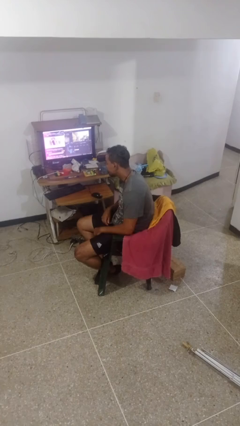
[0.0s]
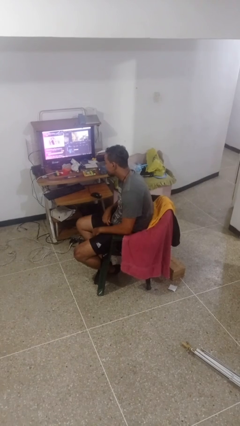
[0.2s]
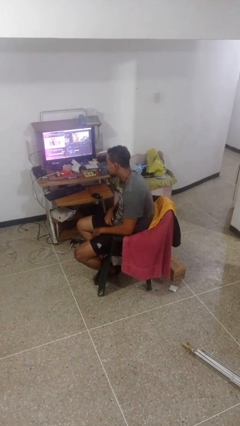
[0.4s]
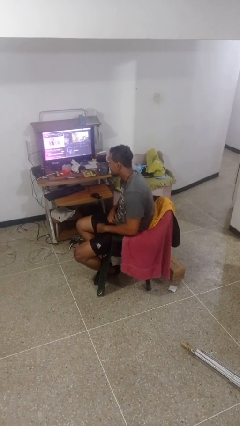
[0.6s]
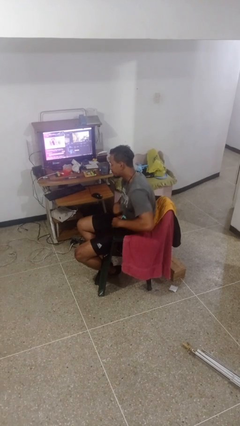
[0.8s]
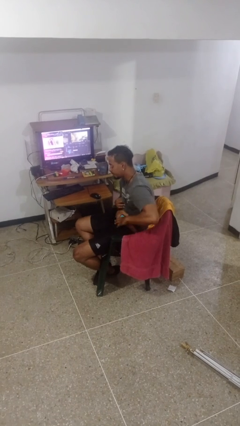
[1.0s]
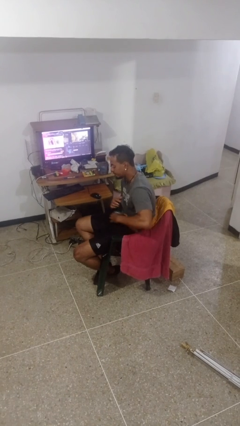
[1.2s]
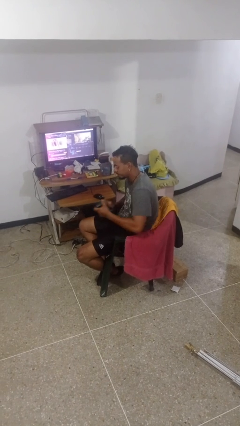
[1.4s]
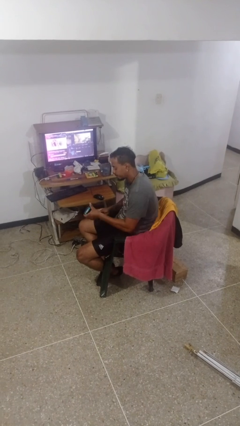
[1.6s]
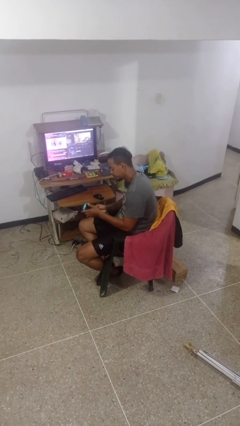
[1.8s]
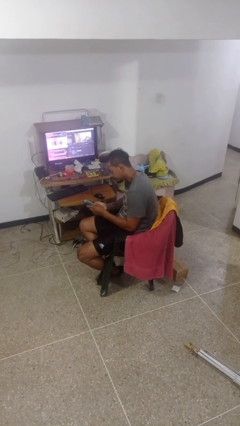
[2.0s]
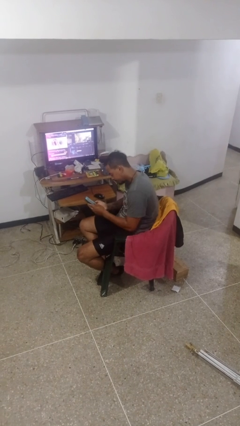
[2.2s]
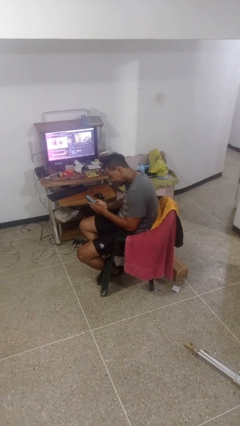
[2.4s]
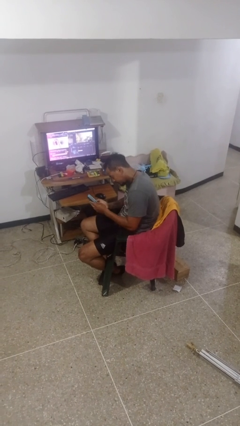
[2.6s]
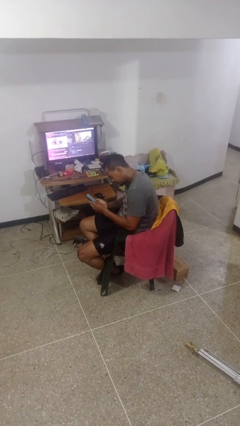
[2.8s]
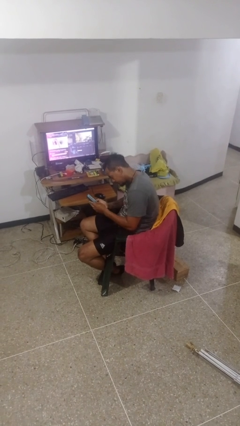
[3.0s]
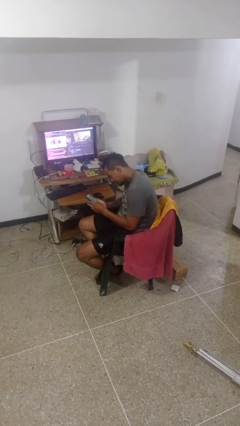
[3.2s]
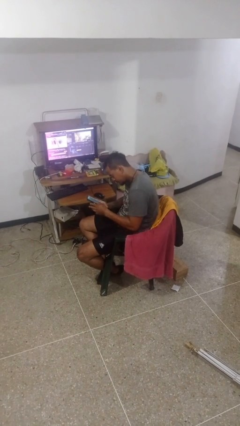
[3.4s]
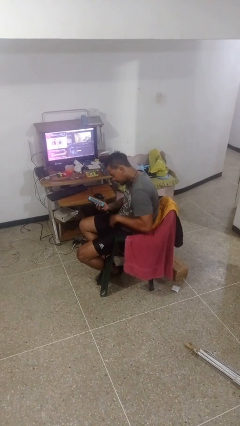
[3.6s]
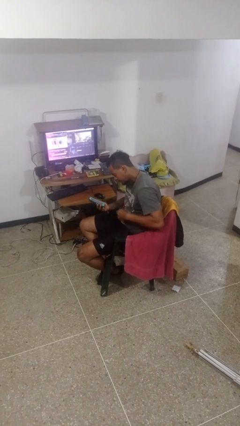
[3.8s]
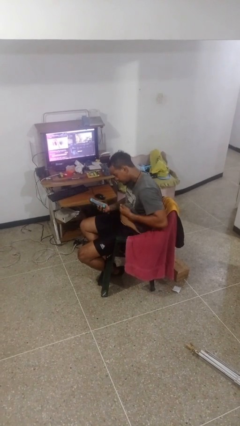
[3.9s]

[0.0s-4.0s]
person takes phone from pocket

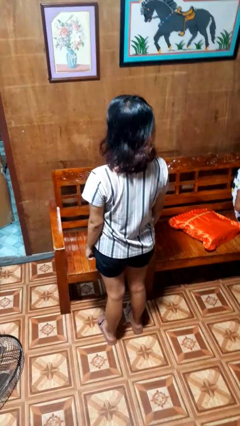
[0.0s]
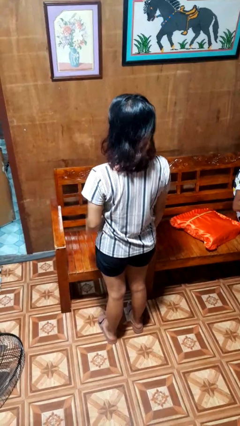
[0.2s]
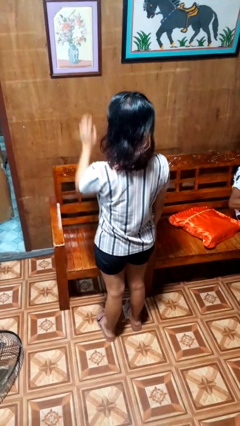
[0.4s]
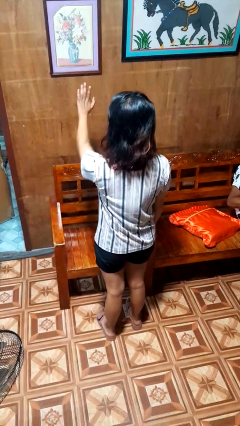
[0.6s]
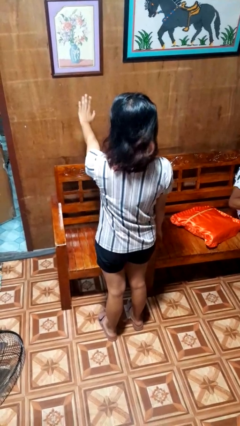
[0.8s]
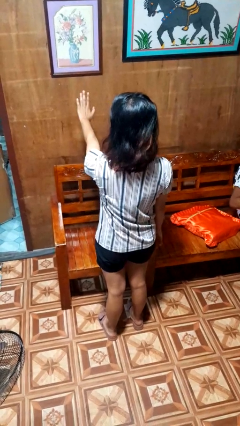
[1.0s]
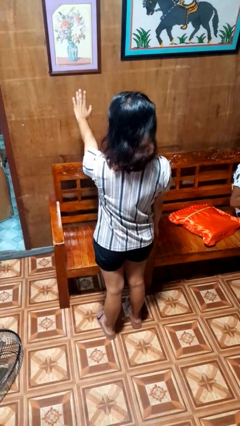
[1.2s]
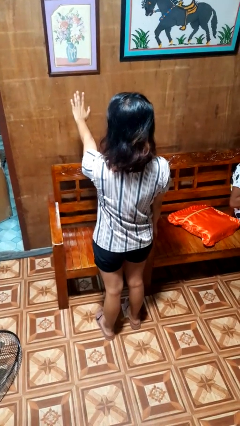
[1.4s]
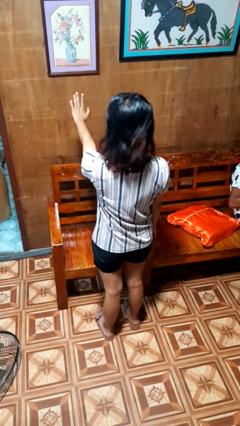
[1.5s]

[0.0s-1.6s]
person gestures stop

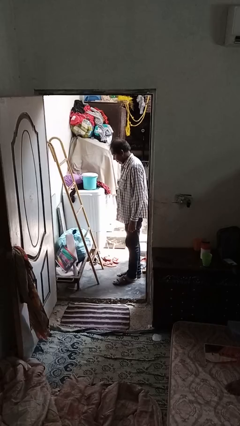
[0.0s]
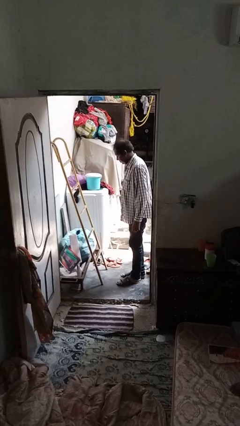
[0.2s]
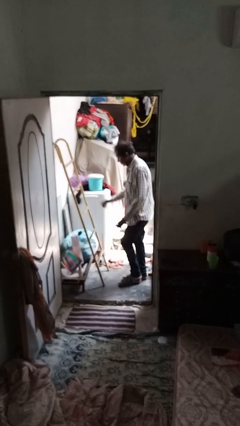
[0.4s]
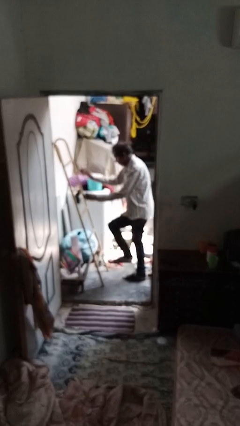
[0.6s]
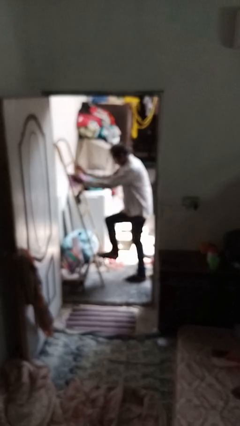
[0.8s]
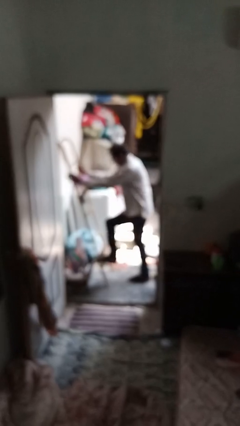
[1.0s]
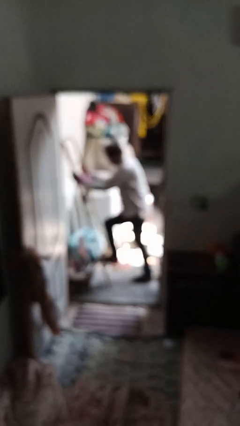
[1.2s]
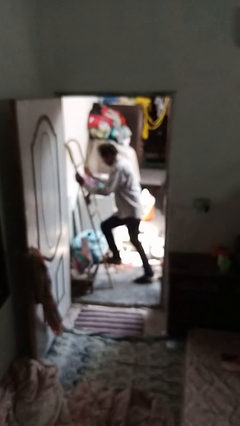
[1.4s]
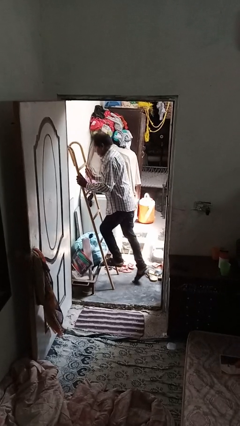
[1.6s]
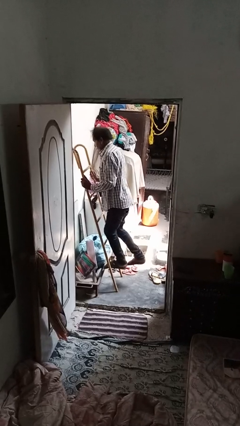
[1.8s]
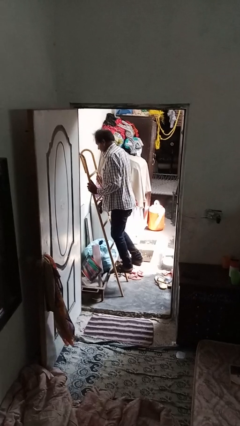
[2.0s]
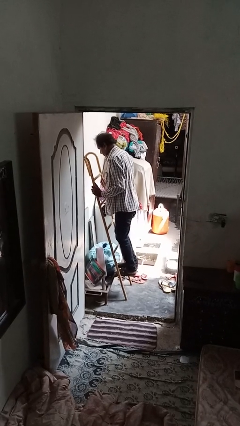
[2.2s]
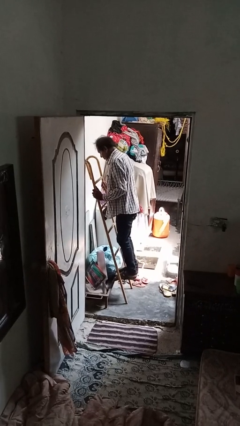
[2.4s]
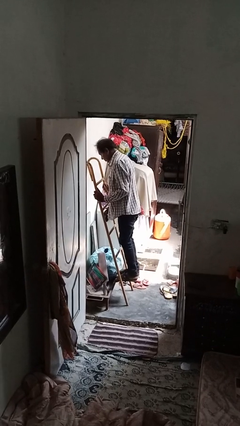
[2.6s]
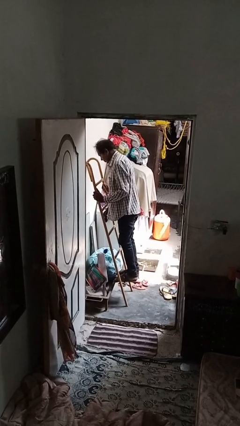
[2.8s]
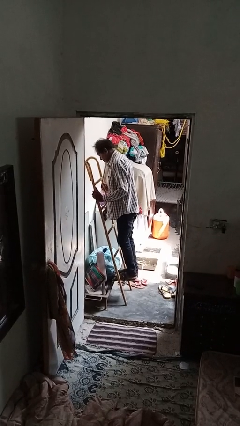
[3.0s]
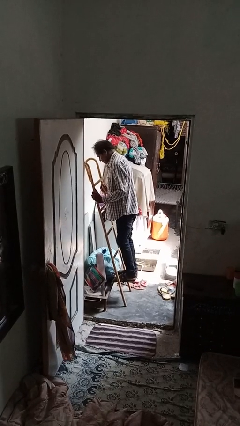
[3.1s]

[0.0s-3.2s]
person climbs up ladder

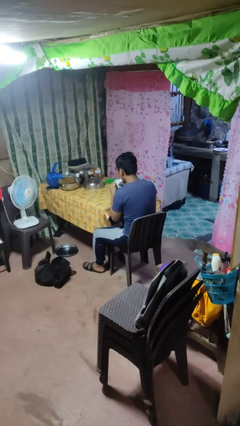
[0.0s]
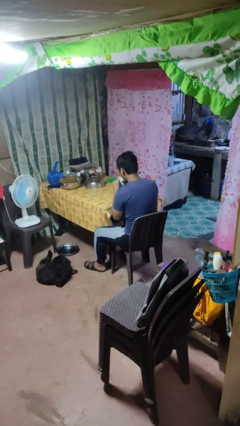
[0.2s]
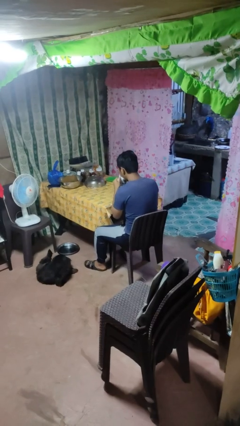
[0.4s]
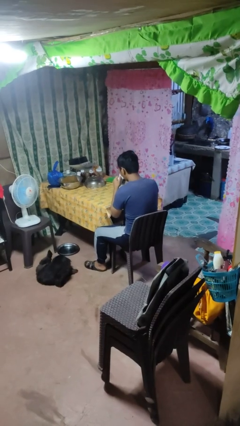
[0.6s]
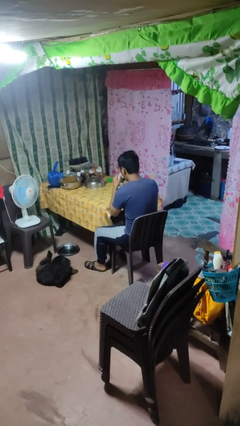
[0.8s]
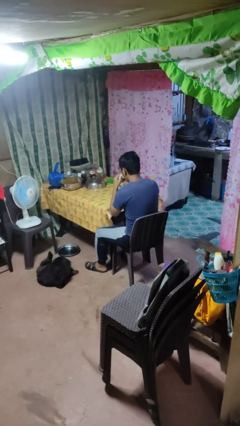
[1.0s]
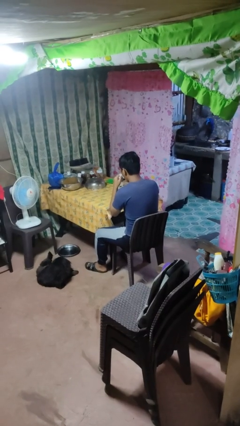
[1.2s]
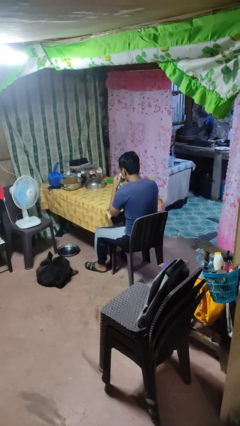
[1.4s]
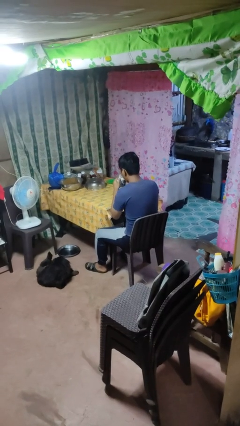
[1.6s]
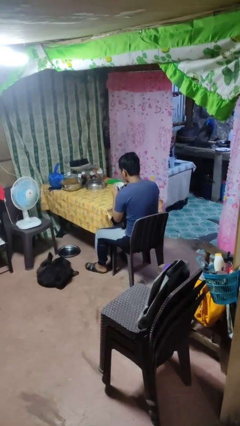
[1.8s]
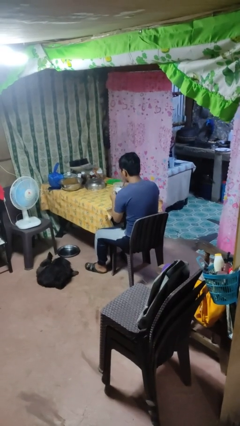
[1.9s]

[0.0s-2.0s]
person drinks from mug

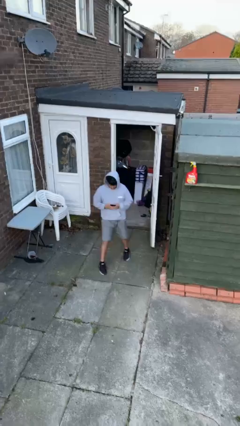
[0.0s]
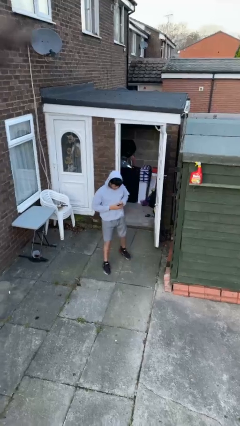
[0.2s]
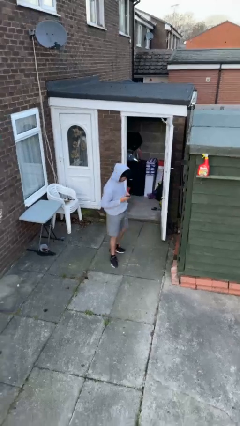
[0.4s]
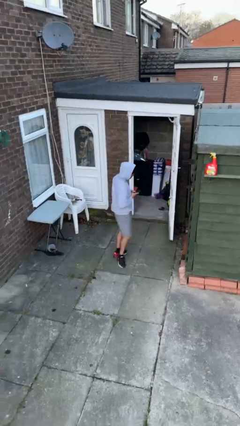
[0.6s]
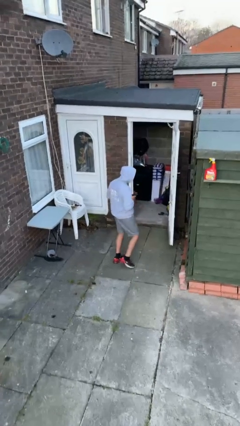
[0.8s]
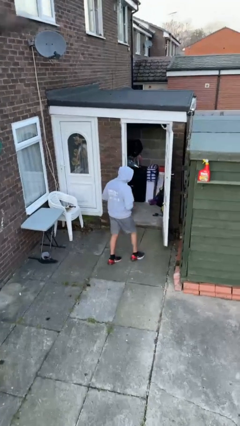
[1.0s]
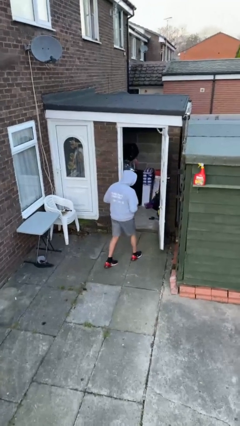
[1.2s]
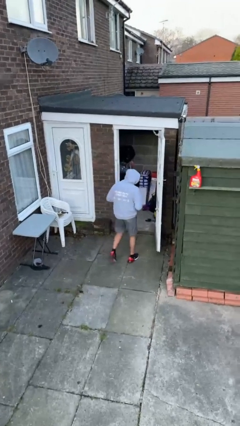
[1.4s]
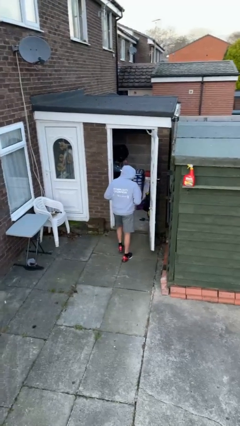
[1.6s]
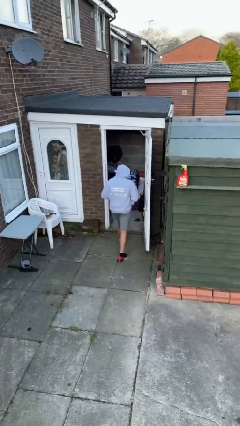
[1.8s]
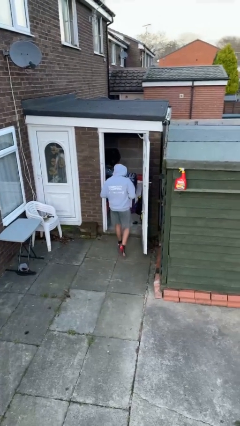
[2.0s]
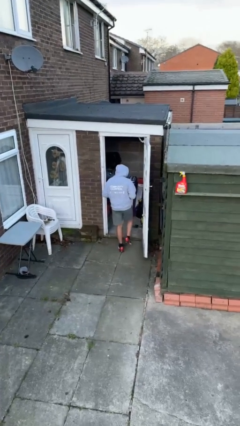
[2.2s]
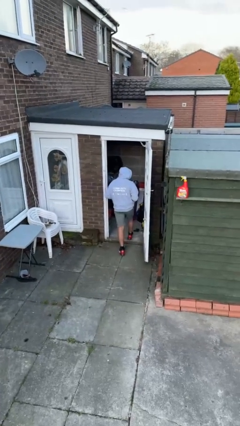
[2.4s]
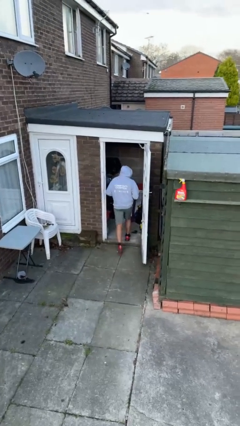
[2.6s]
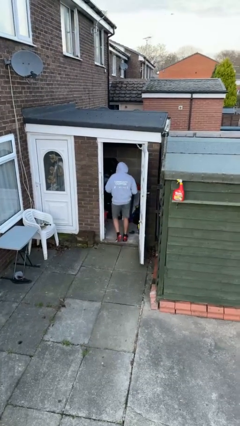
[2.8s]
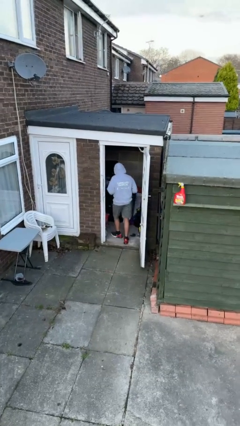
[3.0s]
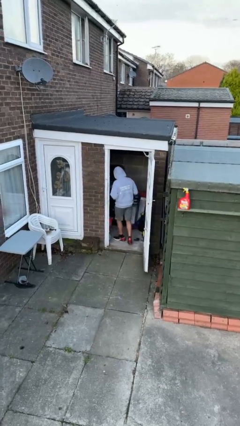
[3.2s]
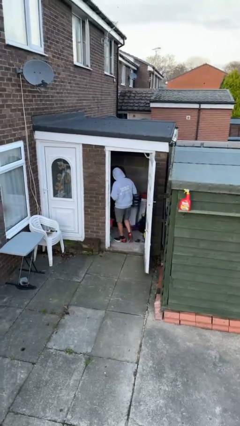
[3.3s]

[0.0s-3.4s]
person exits scene through structure

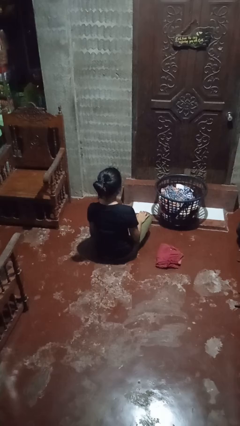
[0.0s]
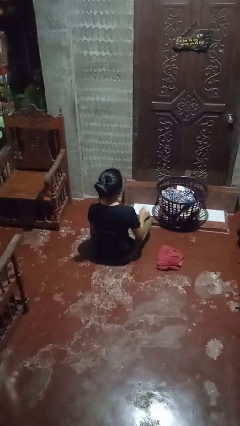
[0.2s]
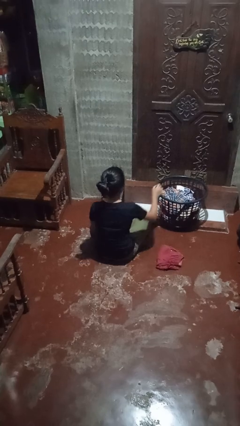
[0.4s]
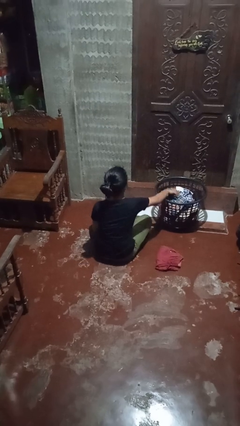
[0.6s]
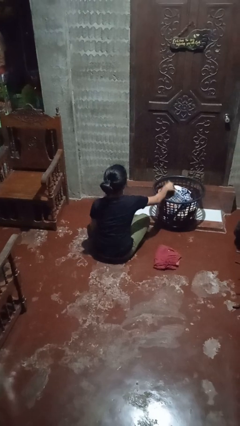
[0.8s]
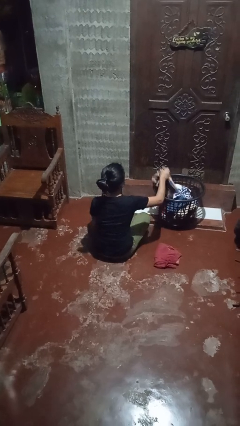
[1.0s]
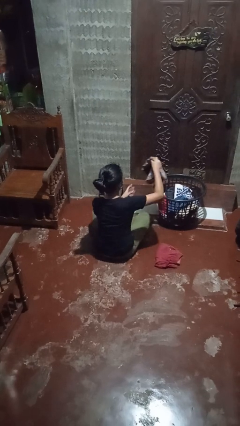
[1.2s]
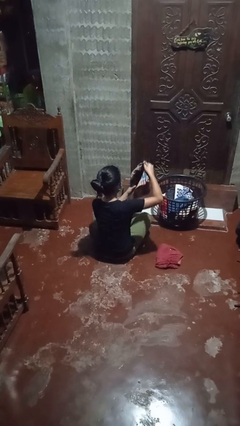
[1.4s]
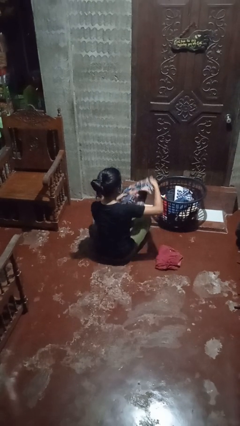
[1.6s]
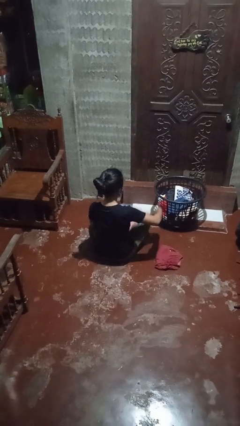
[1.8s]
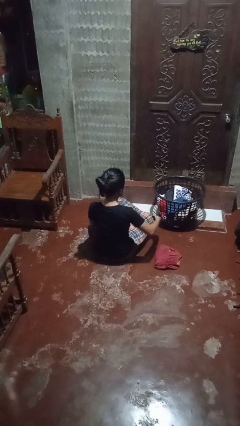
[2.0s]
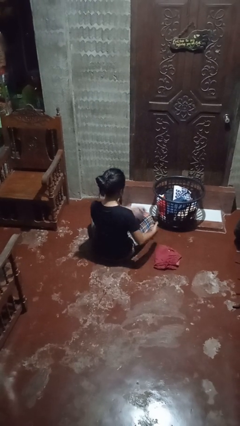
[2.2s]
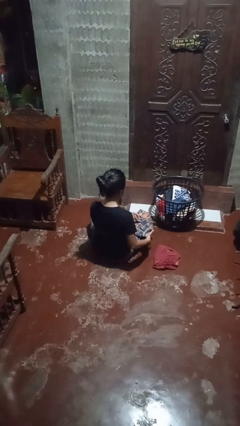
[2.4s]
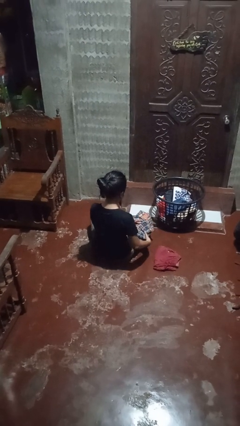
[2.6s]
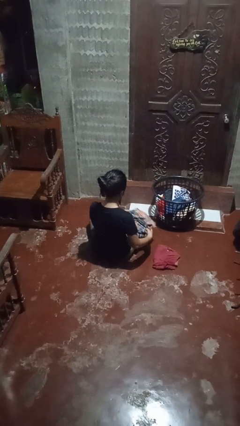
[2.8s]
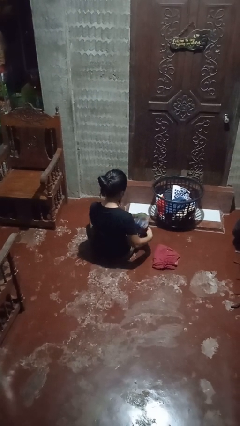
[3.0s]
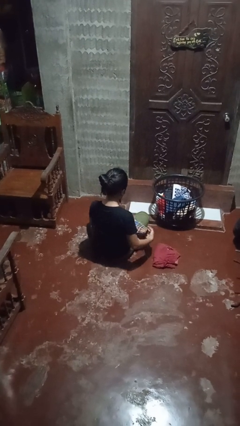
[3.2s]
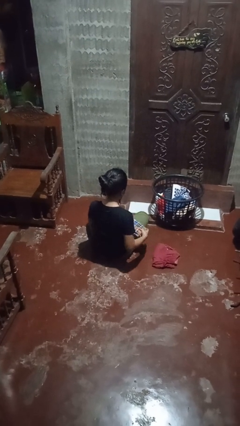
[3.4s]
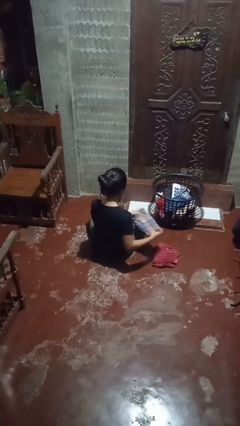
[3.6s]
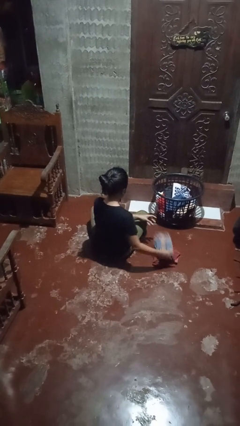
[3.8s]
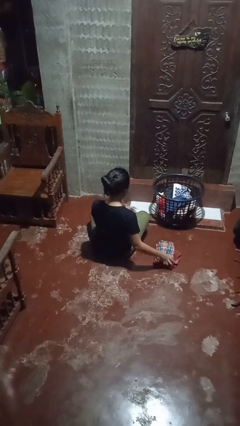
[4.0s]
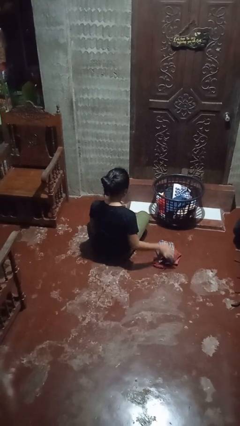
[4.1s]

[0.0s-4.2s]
person folds pants
